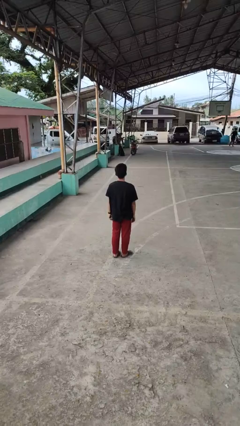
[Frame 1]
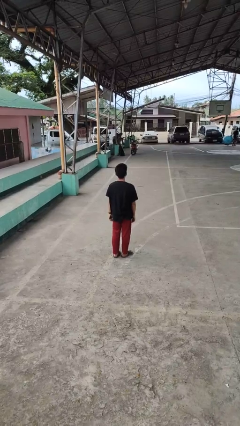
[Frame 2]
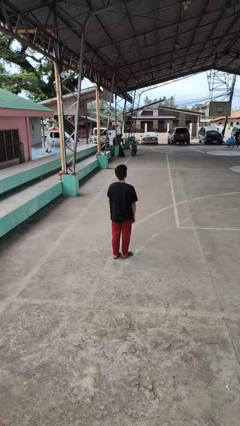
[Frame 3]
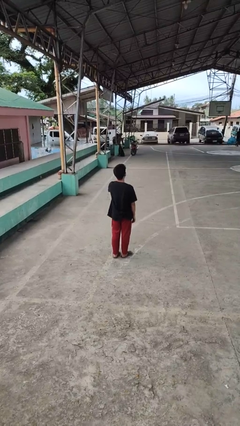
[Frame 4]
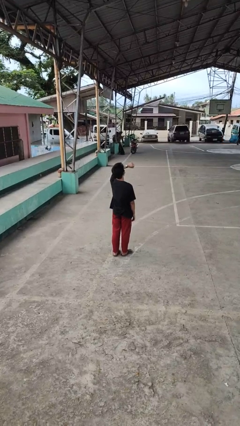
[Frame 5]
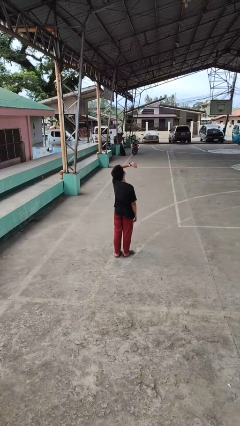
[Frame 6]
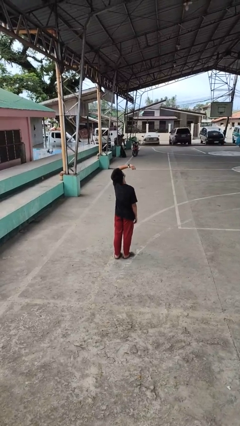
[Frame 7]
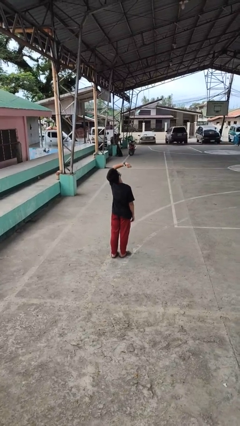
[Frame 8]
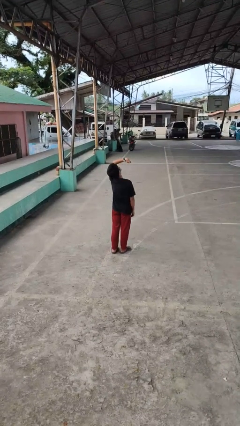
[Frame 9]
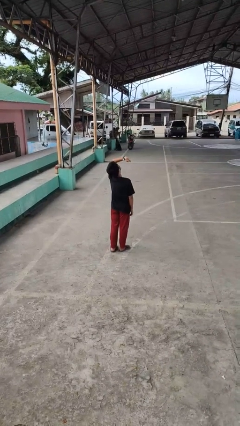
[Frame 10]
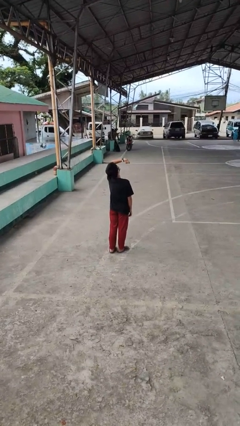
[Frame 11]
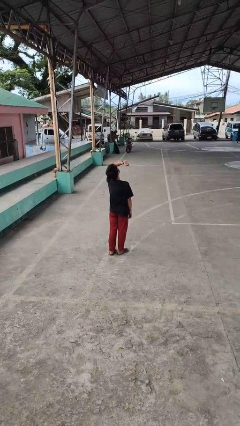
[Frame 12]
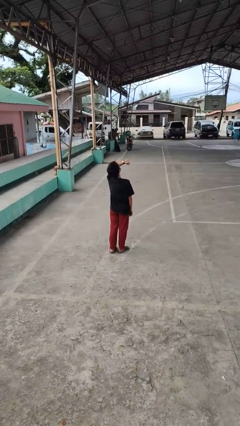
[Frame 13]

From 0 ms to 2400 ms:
person looks at wristwatch

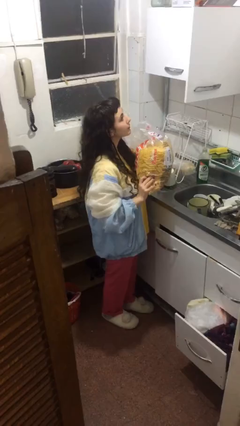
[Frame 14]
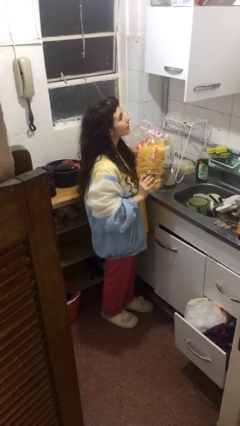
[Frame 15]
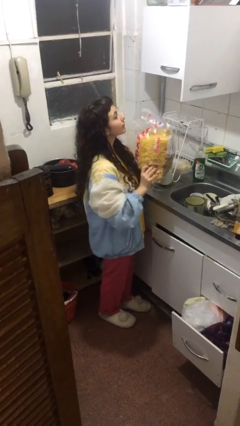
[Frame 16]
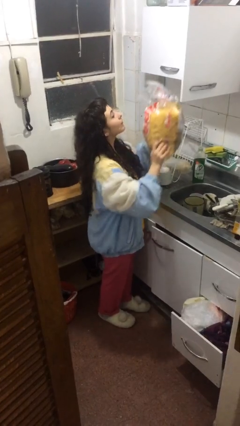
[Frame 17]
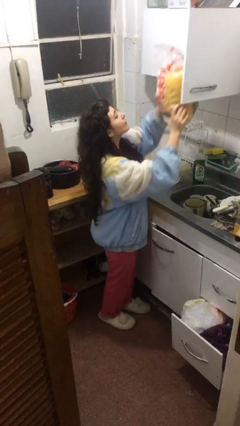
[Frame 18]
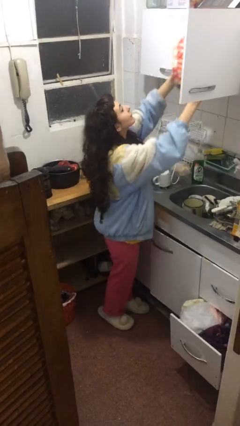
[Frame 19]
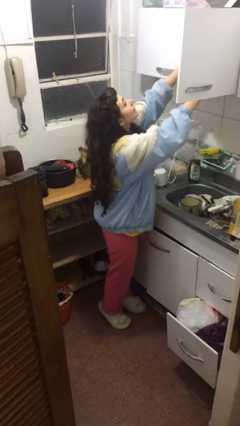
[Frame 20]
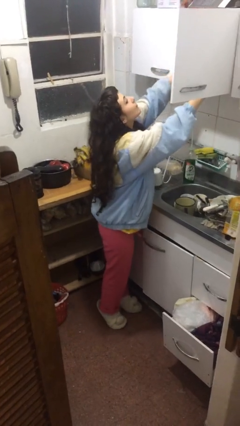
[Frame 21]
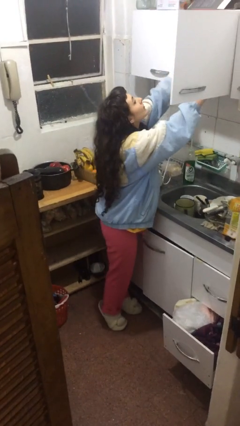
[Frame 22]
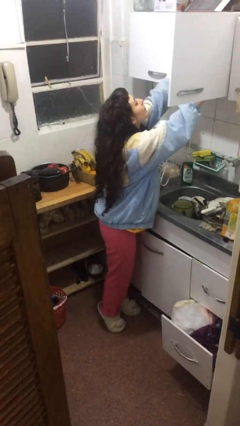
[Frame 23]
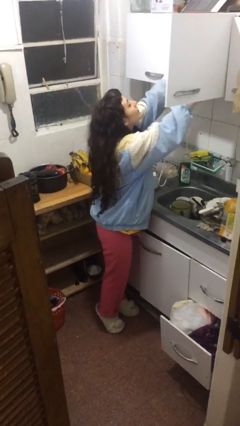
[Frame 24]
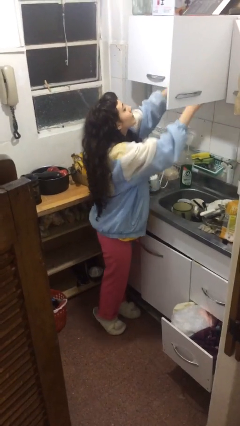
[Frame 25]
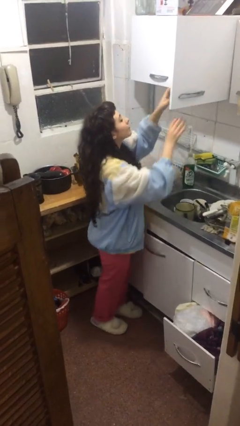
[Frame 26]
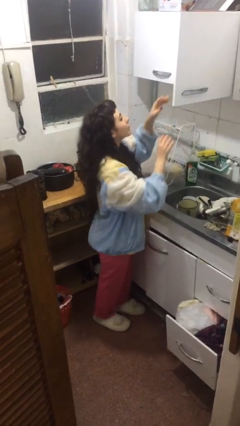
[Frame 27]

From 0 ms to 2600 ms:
person puts down object into cabinet

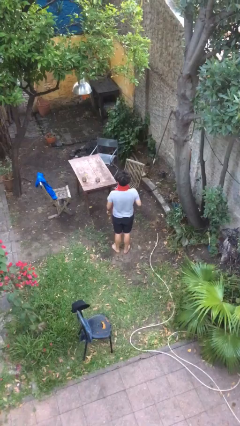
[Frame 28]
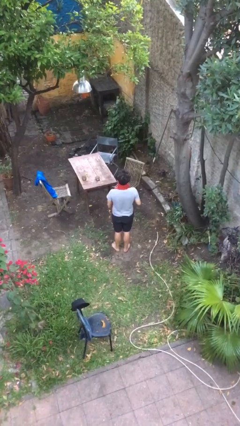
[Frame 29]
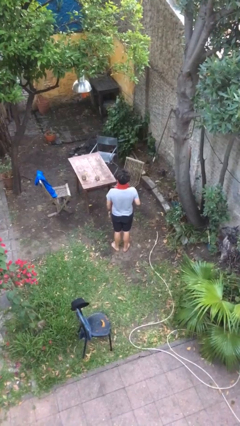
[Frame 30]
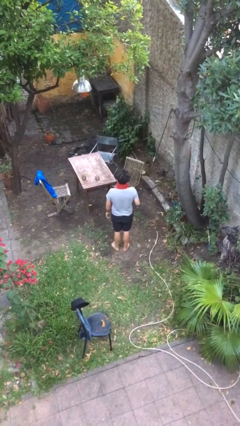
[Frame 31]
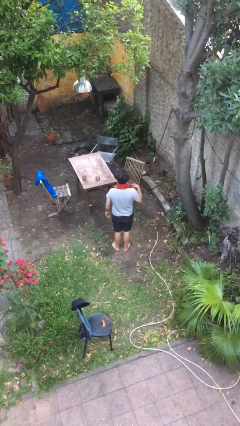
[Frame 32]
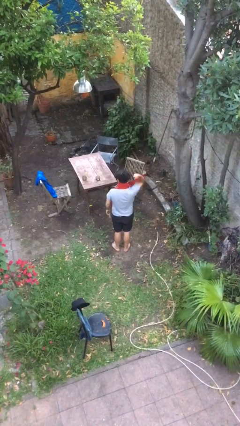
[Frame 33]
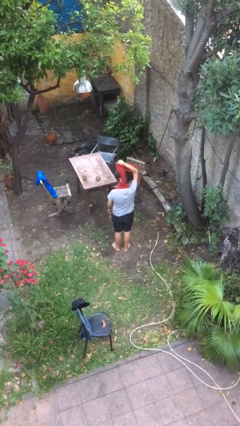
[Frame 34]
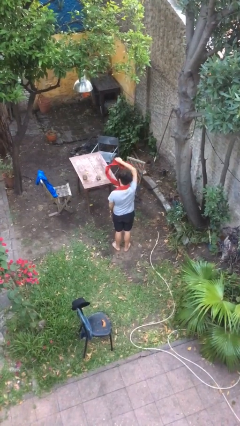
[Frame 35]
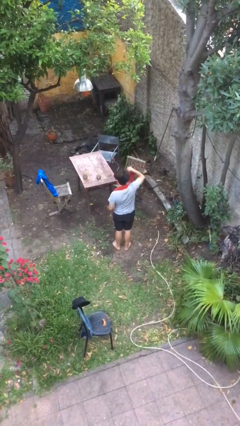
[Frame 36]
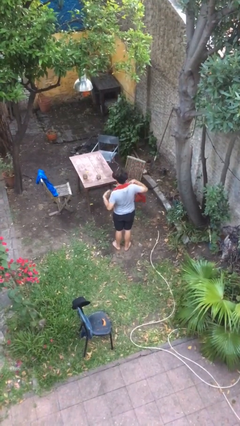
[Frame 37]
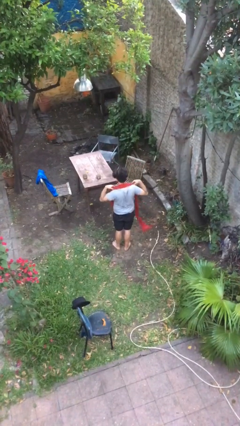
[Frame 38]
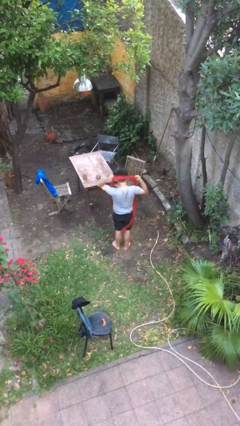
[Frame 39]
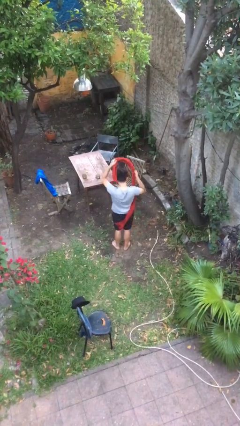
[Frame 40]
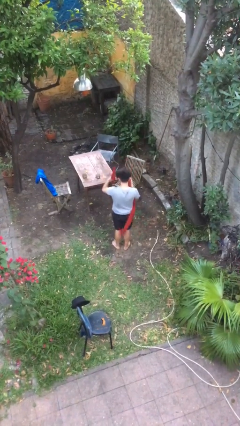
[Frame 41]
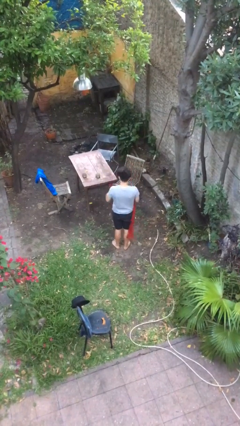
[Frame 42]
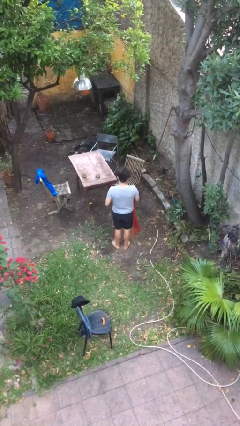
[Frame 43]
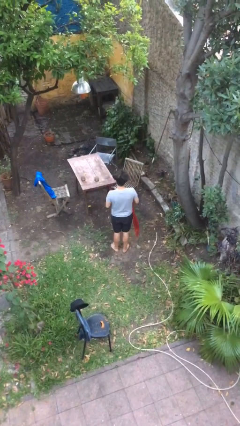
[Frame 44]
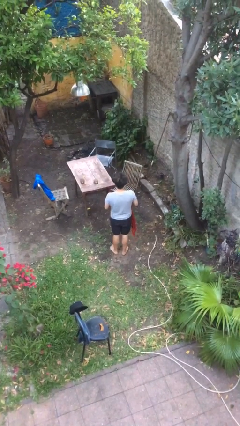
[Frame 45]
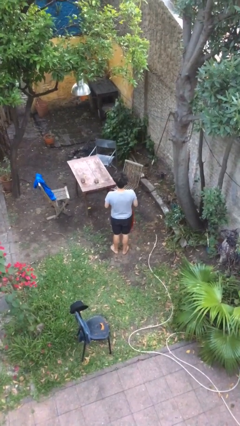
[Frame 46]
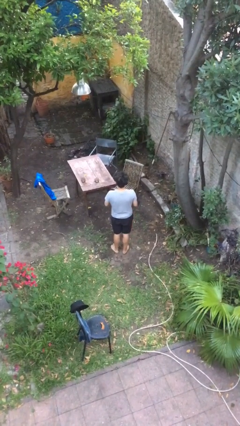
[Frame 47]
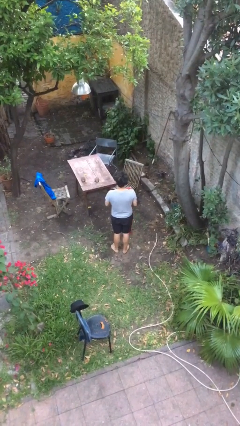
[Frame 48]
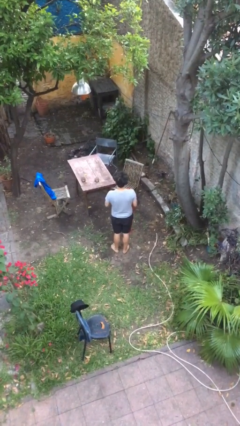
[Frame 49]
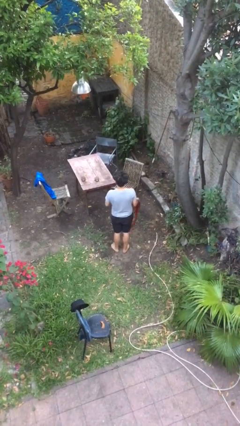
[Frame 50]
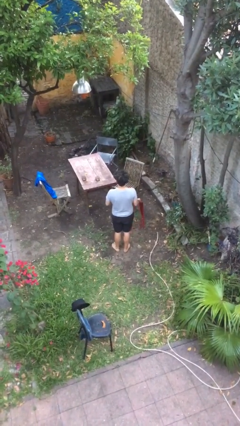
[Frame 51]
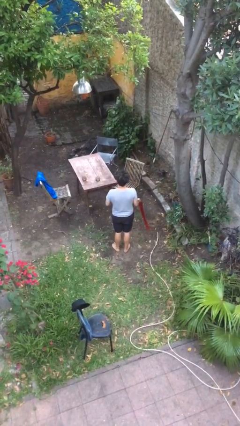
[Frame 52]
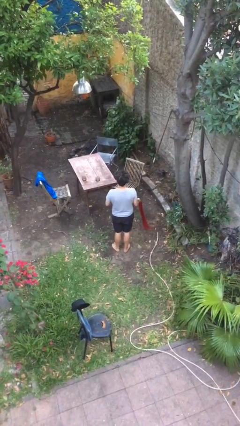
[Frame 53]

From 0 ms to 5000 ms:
person takes off scarf

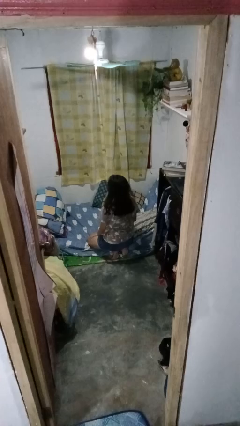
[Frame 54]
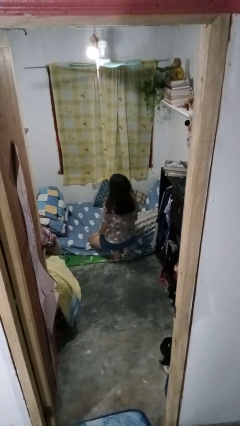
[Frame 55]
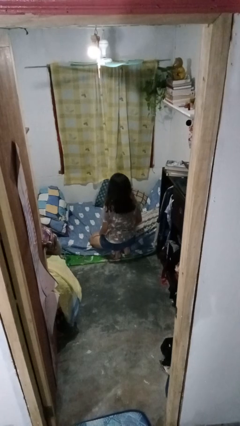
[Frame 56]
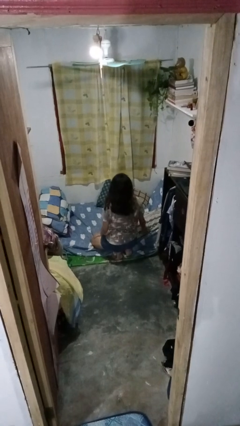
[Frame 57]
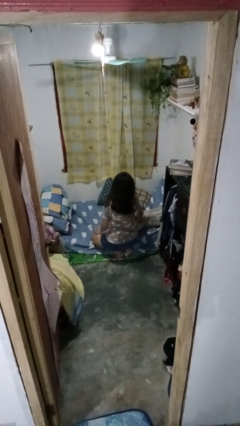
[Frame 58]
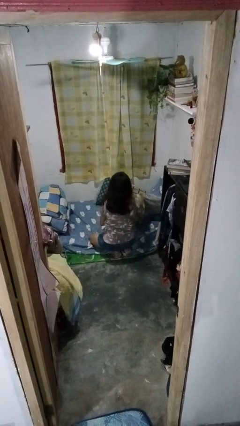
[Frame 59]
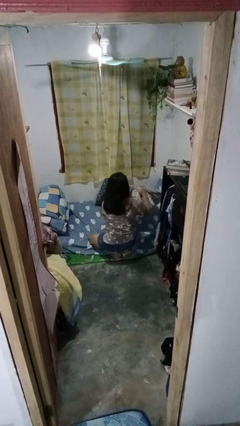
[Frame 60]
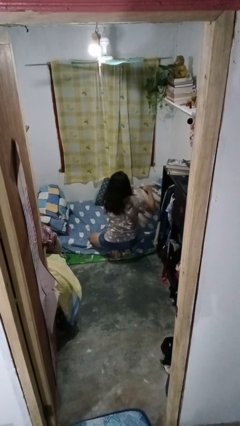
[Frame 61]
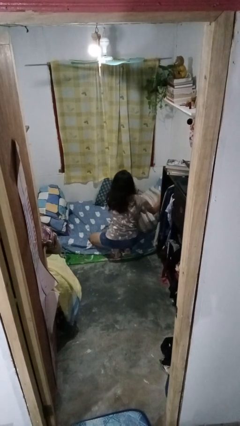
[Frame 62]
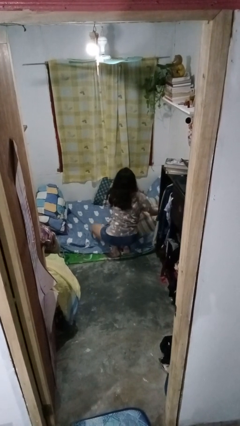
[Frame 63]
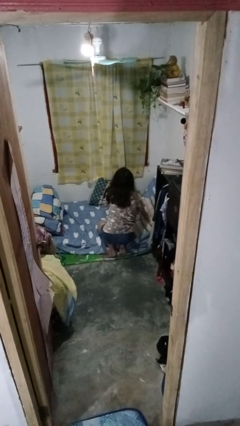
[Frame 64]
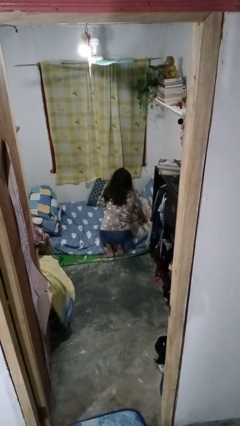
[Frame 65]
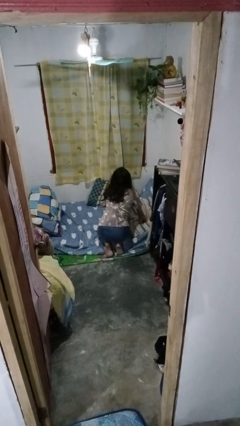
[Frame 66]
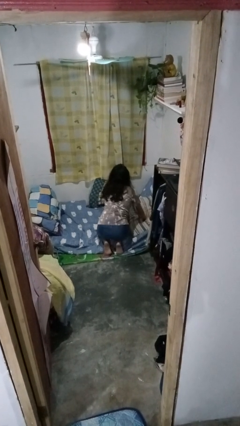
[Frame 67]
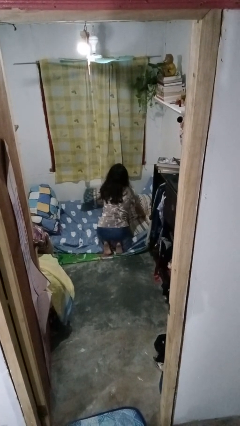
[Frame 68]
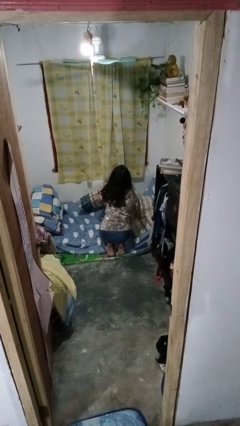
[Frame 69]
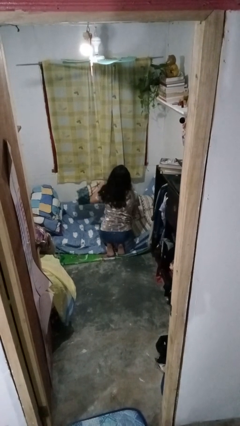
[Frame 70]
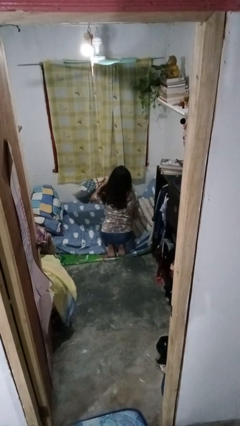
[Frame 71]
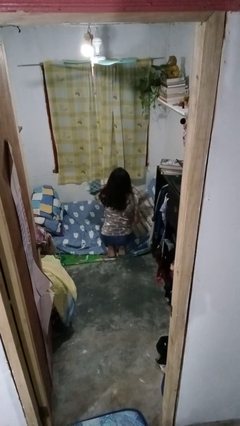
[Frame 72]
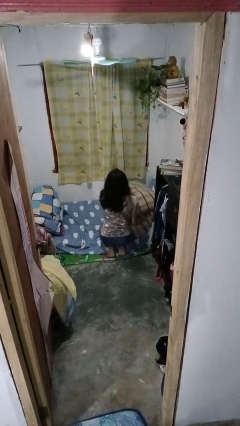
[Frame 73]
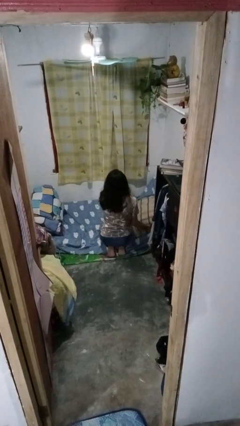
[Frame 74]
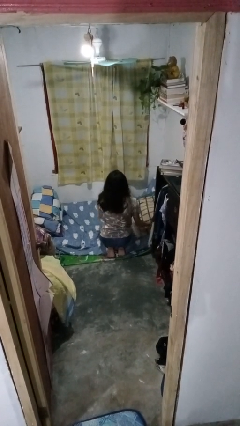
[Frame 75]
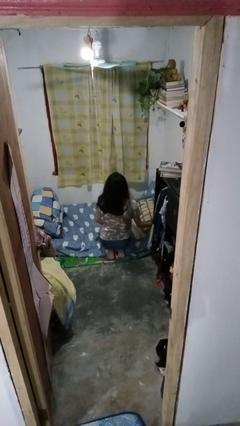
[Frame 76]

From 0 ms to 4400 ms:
person makes bed

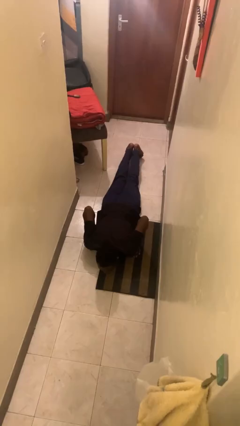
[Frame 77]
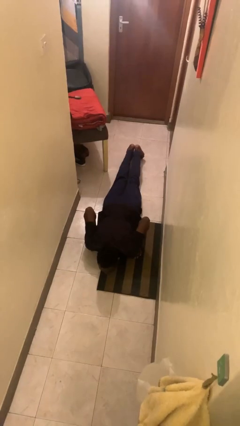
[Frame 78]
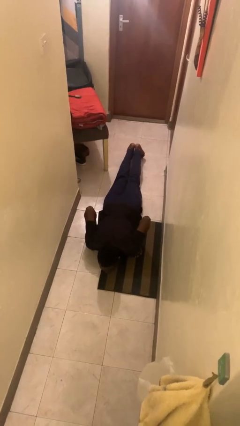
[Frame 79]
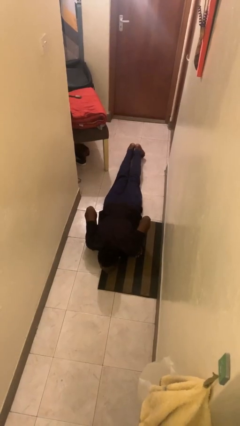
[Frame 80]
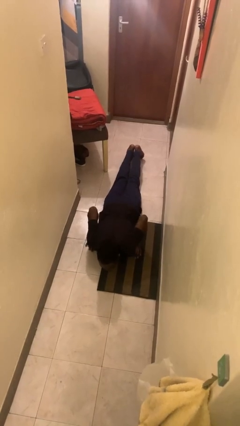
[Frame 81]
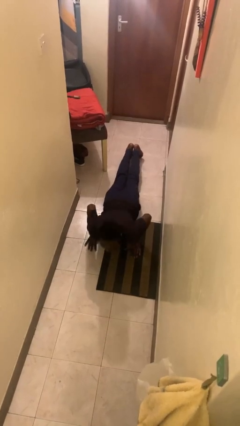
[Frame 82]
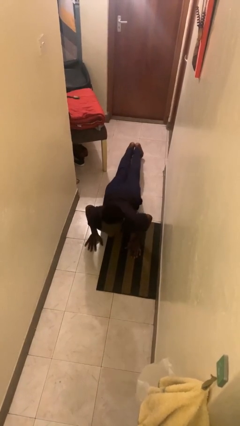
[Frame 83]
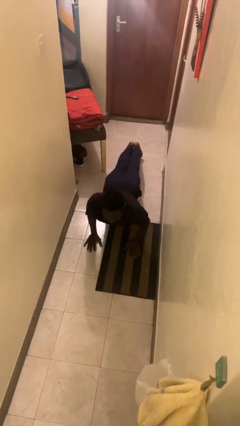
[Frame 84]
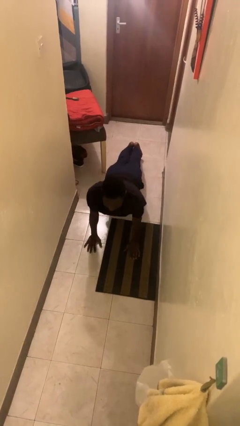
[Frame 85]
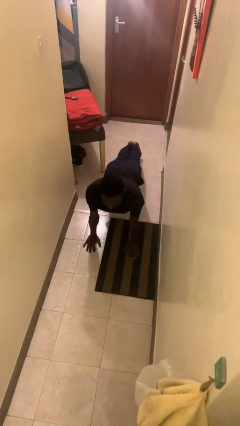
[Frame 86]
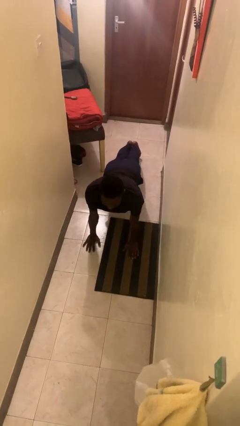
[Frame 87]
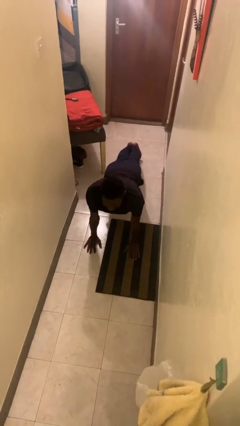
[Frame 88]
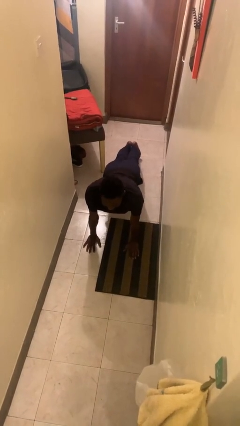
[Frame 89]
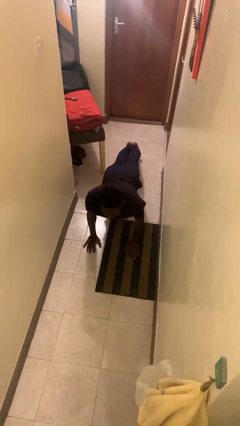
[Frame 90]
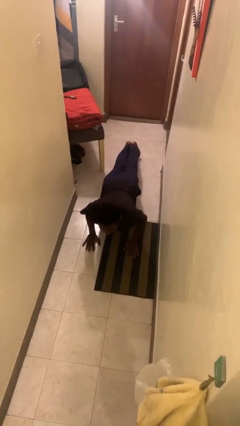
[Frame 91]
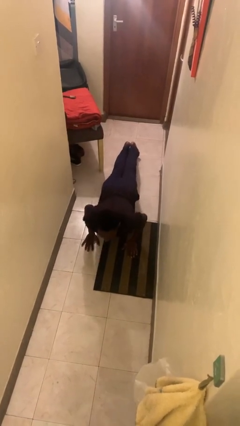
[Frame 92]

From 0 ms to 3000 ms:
person exercises with pushup

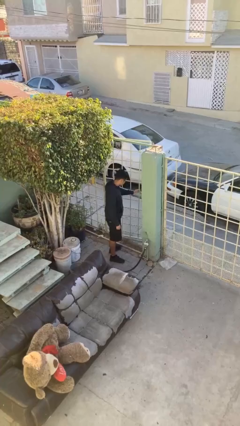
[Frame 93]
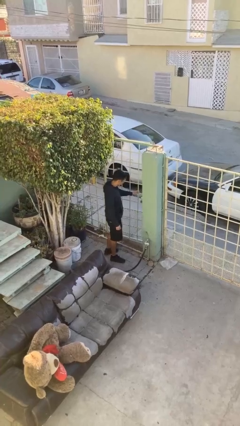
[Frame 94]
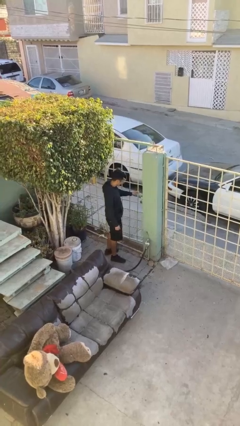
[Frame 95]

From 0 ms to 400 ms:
person closes facility door
